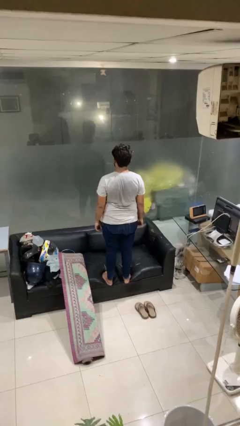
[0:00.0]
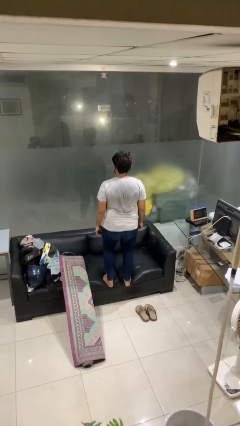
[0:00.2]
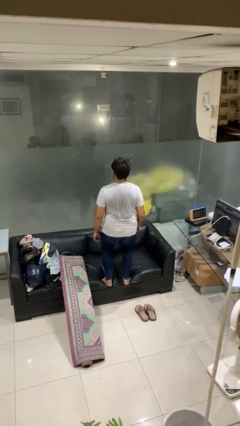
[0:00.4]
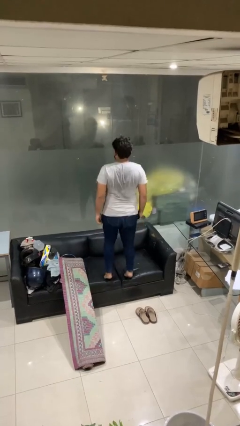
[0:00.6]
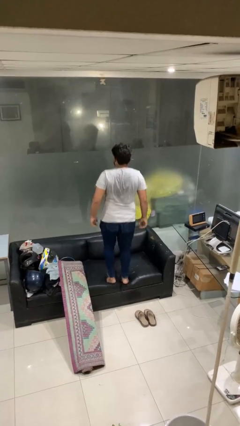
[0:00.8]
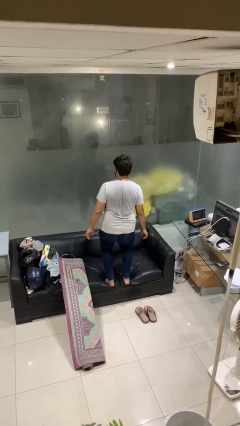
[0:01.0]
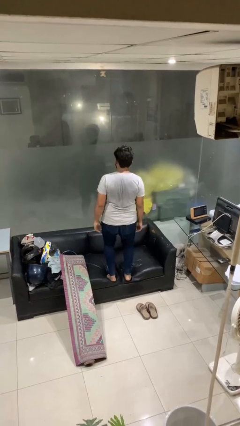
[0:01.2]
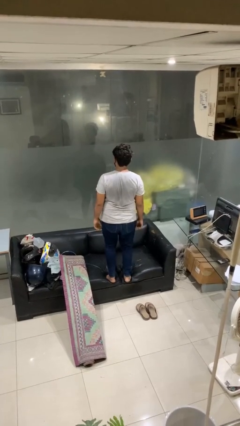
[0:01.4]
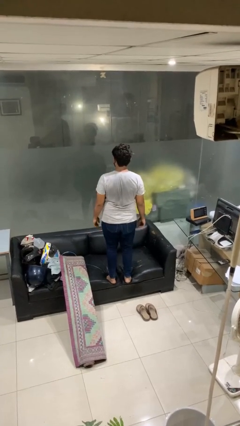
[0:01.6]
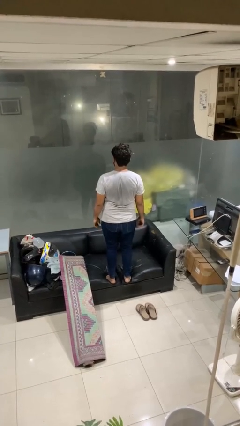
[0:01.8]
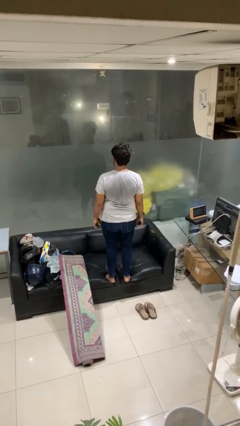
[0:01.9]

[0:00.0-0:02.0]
person jumps on couch

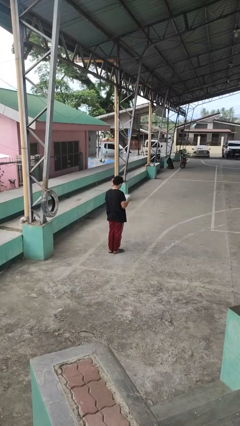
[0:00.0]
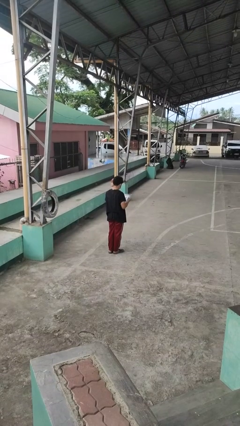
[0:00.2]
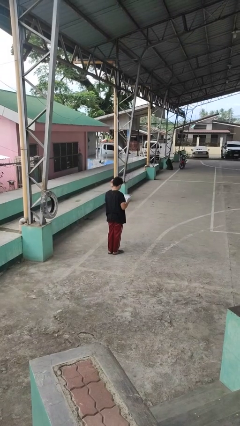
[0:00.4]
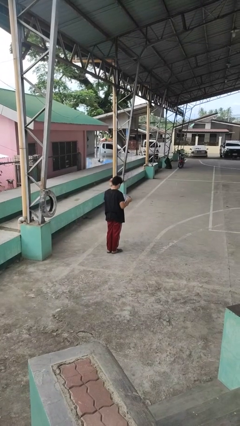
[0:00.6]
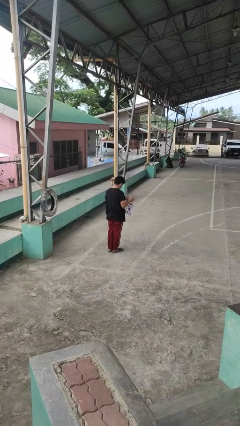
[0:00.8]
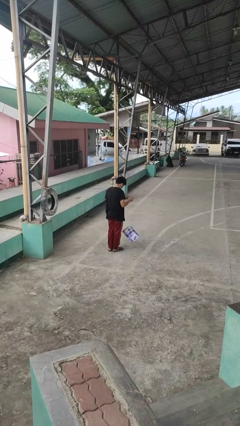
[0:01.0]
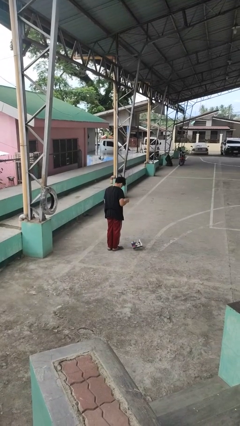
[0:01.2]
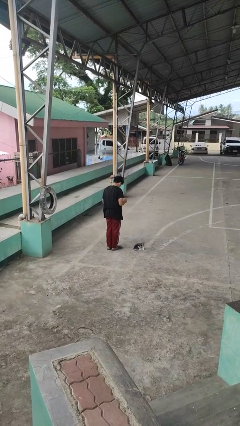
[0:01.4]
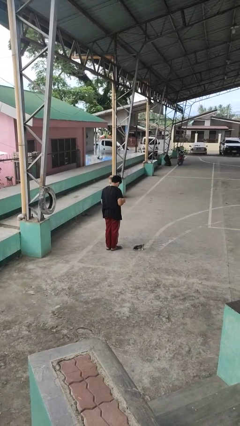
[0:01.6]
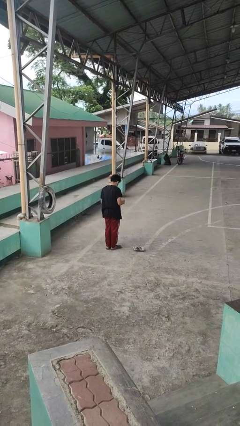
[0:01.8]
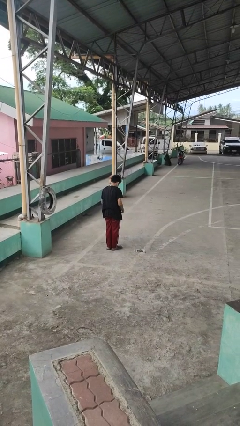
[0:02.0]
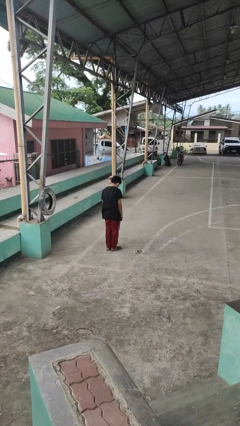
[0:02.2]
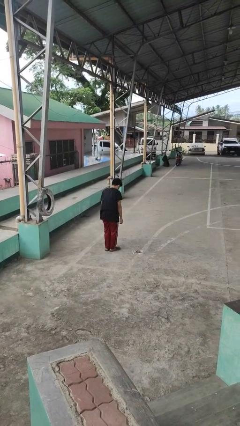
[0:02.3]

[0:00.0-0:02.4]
person drops object

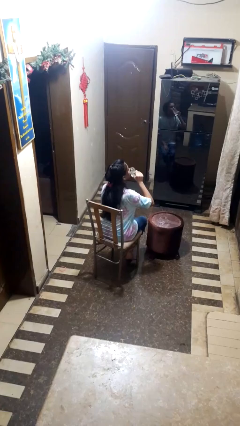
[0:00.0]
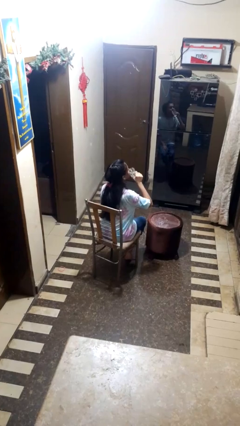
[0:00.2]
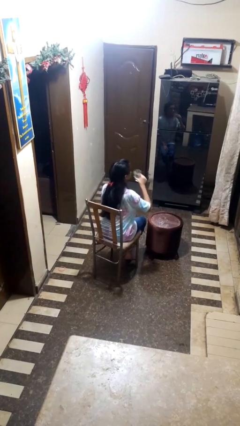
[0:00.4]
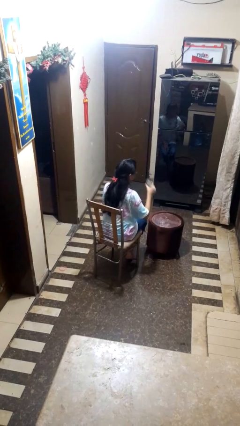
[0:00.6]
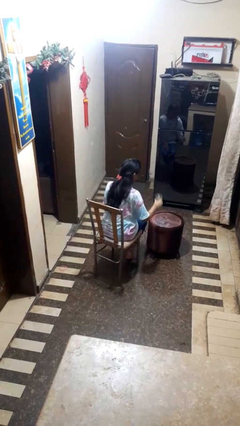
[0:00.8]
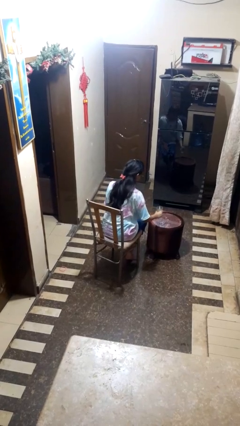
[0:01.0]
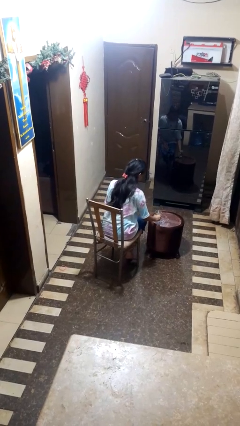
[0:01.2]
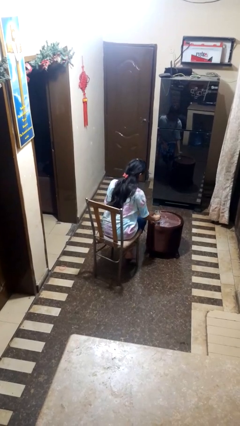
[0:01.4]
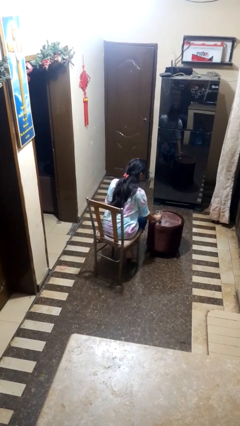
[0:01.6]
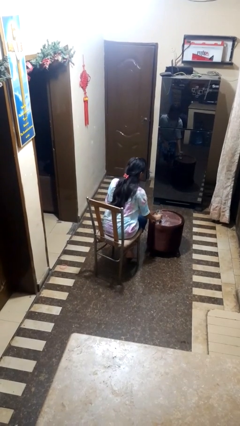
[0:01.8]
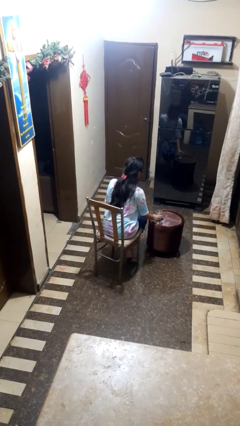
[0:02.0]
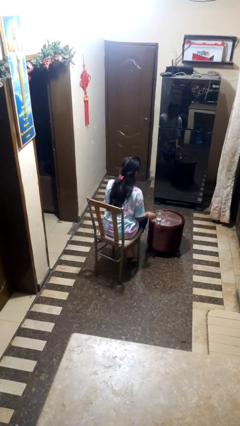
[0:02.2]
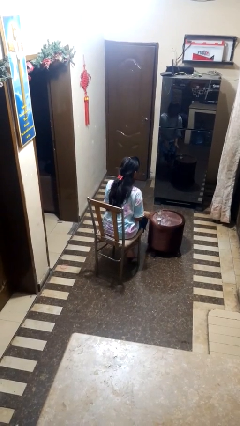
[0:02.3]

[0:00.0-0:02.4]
person puts down object on table

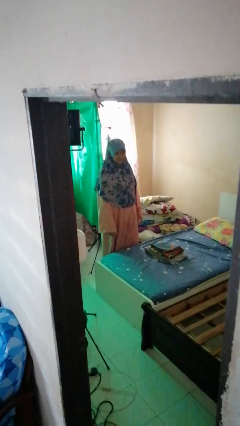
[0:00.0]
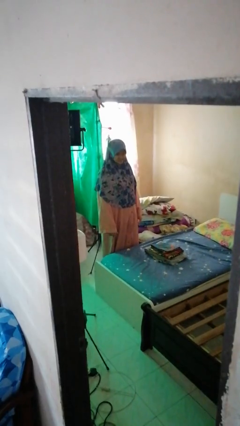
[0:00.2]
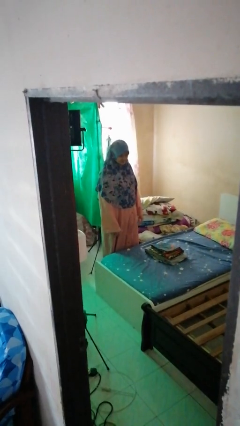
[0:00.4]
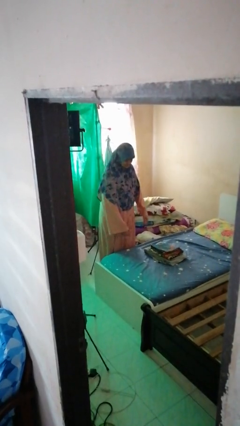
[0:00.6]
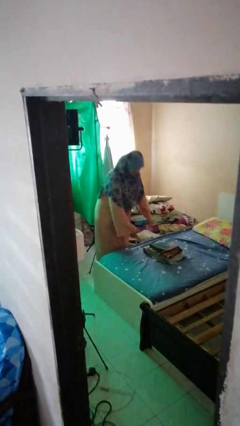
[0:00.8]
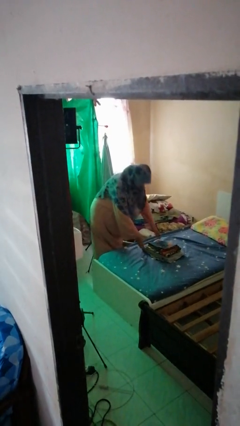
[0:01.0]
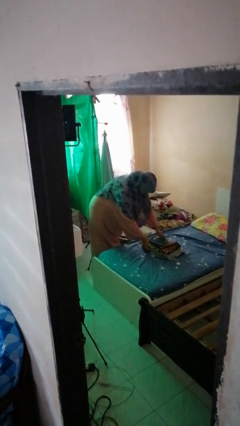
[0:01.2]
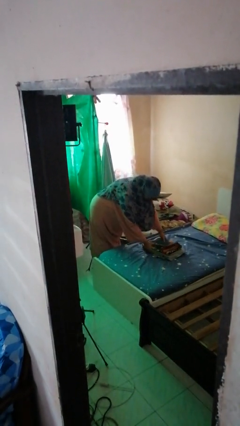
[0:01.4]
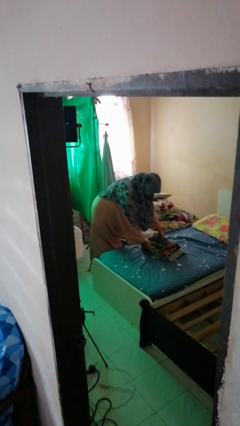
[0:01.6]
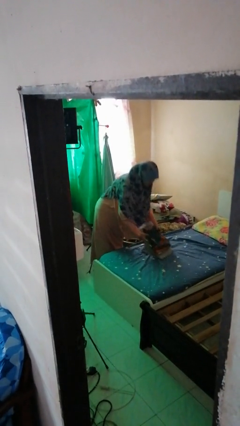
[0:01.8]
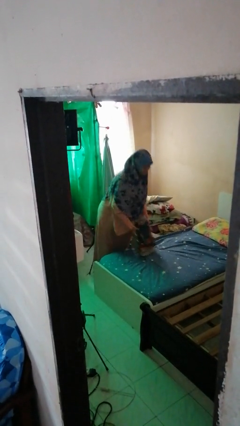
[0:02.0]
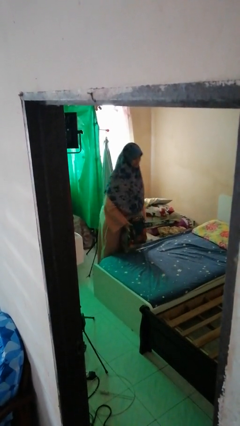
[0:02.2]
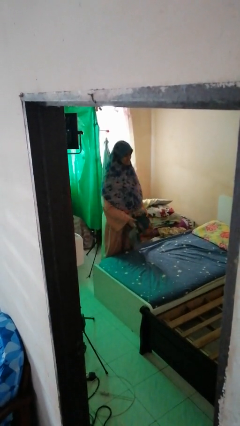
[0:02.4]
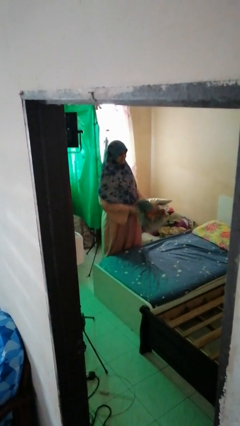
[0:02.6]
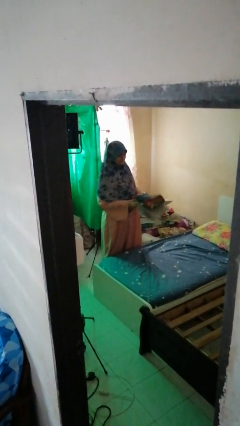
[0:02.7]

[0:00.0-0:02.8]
person picks up object from bed

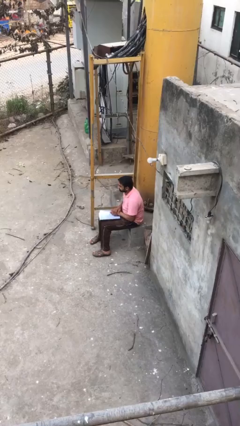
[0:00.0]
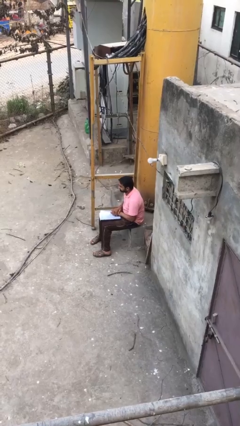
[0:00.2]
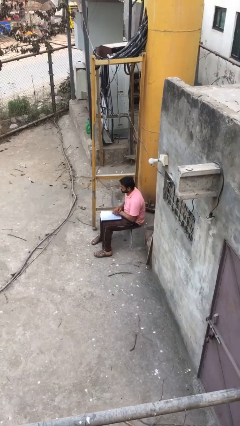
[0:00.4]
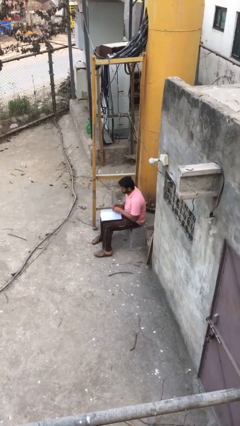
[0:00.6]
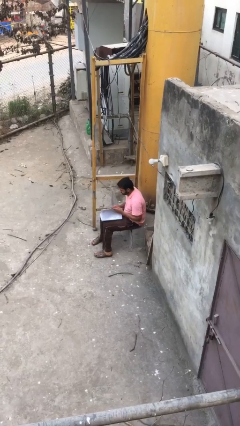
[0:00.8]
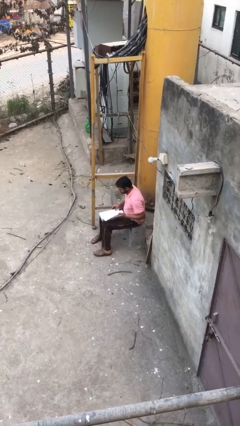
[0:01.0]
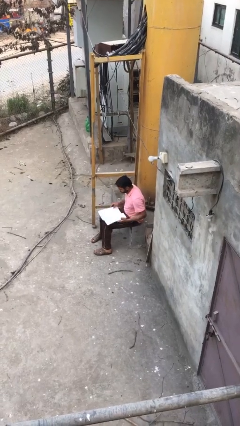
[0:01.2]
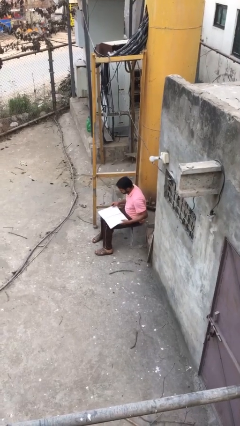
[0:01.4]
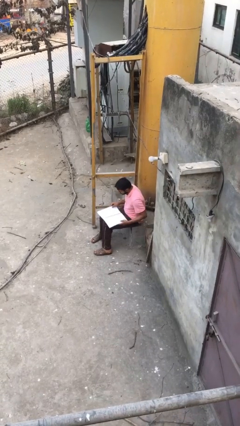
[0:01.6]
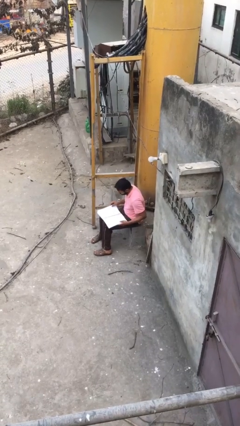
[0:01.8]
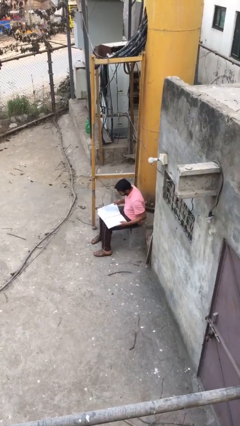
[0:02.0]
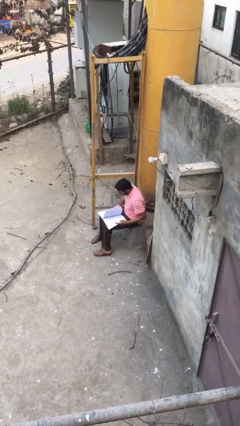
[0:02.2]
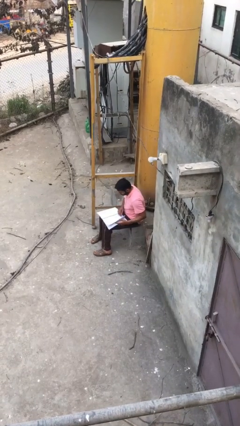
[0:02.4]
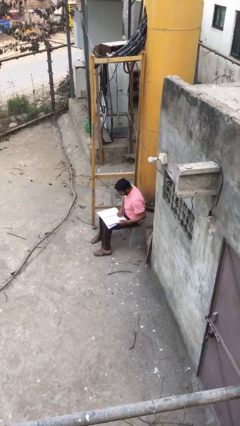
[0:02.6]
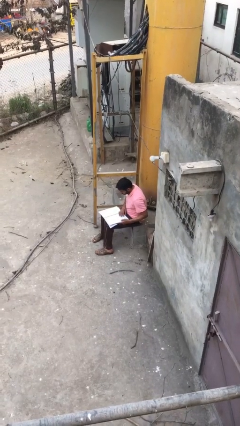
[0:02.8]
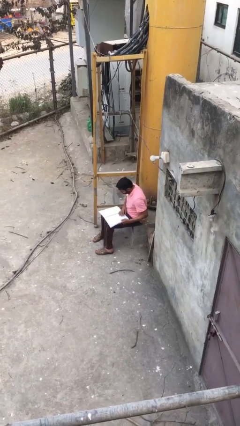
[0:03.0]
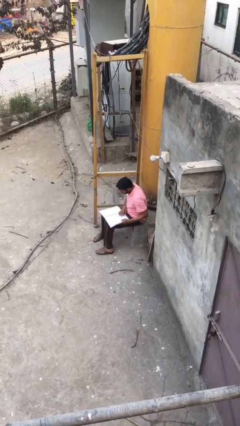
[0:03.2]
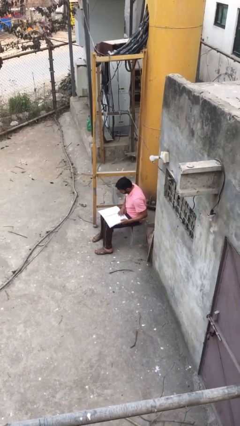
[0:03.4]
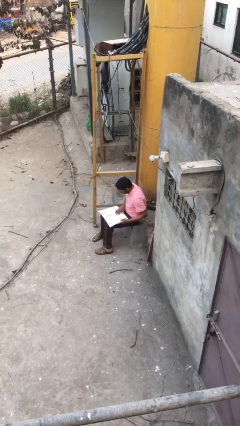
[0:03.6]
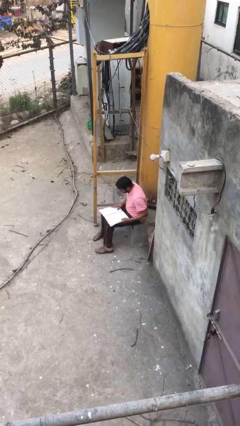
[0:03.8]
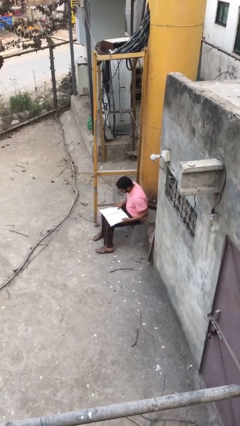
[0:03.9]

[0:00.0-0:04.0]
person reads document

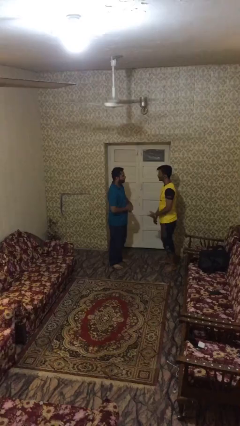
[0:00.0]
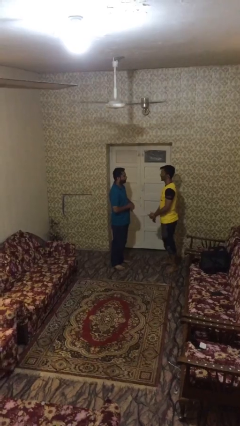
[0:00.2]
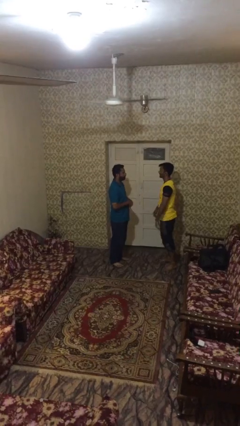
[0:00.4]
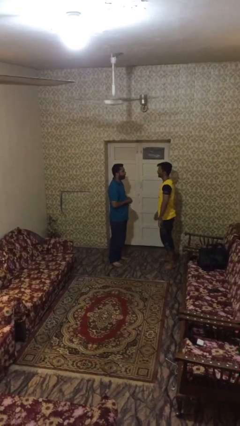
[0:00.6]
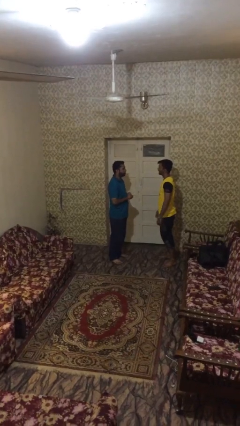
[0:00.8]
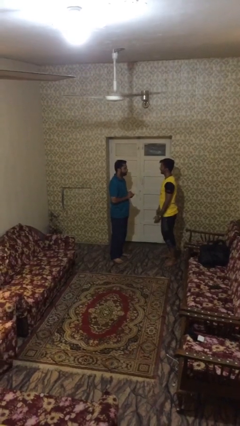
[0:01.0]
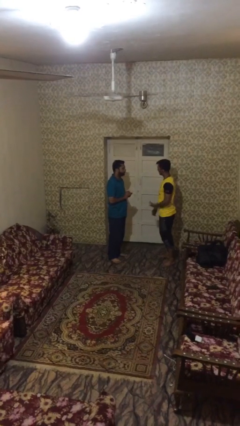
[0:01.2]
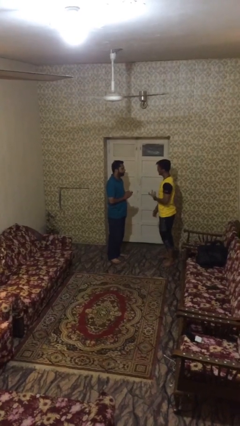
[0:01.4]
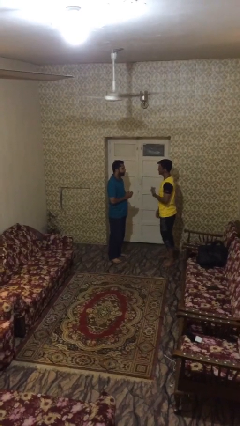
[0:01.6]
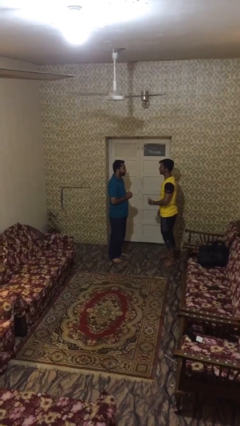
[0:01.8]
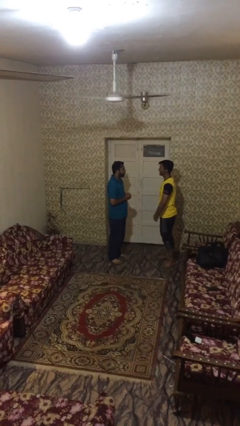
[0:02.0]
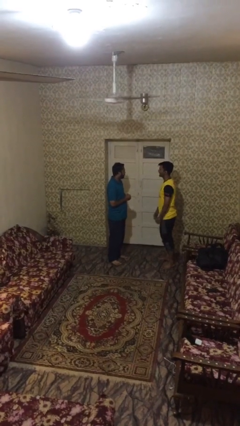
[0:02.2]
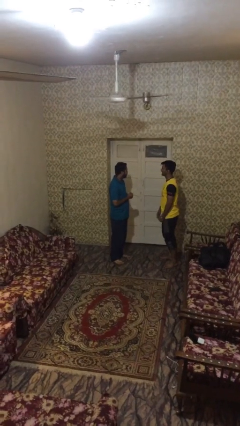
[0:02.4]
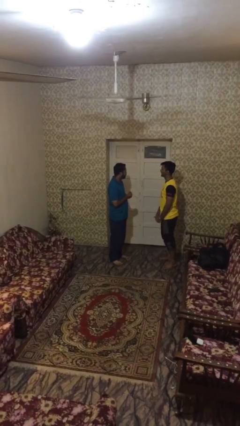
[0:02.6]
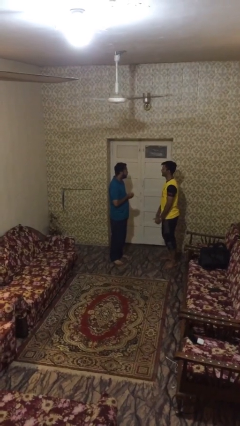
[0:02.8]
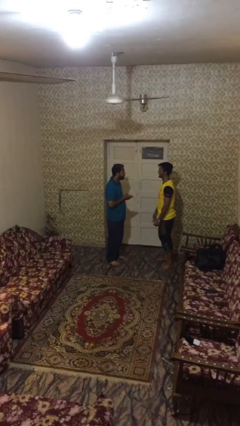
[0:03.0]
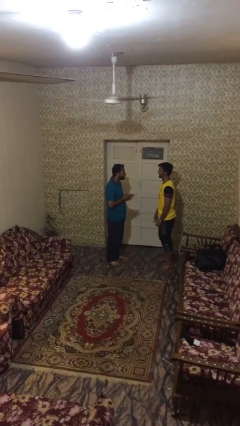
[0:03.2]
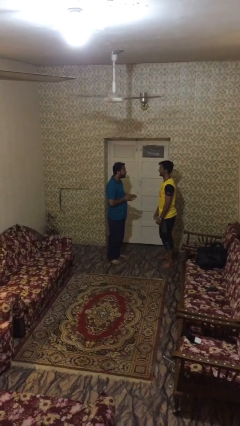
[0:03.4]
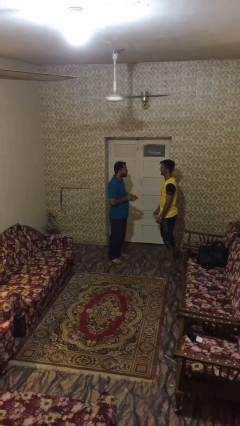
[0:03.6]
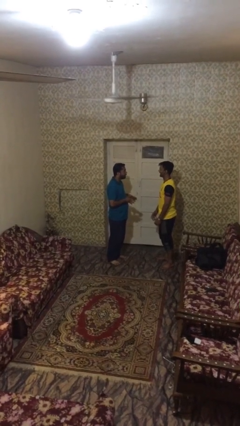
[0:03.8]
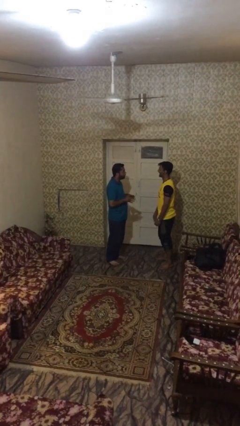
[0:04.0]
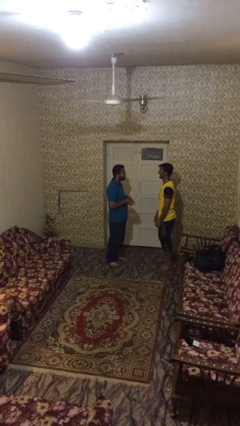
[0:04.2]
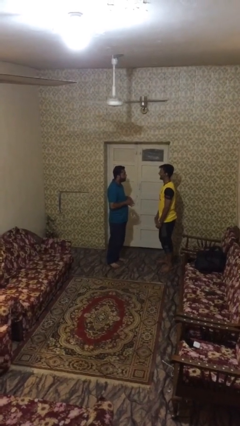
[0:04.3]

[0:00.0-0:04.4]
person talks to person
